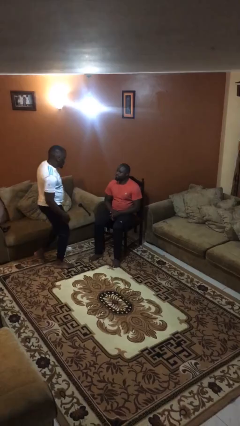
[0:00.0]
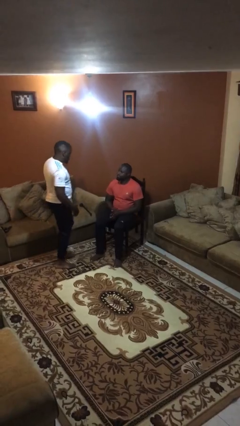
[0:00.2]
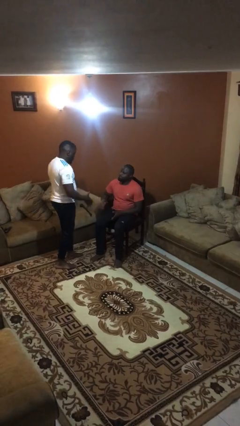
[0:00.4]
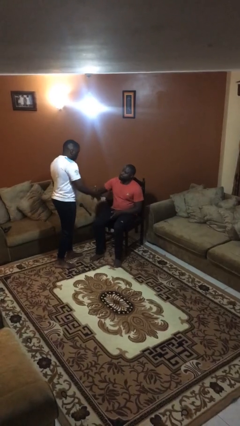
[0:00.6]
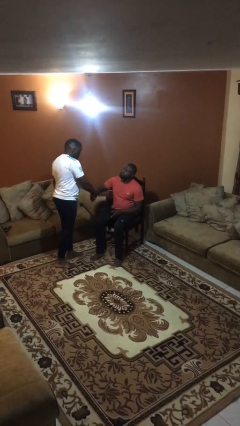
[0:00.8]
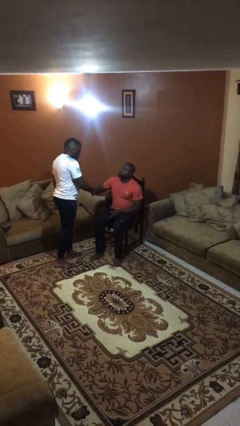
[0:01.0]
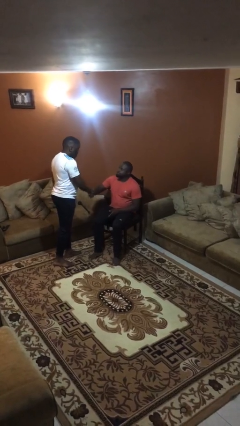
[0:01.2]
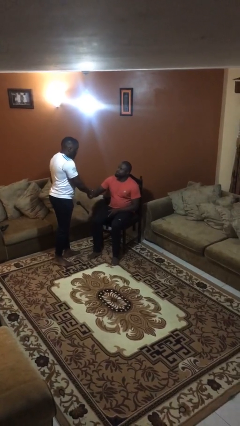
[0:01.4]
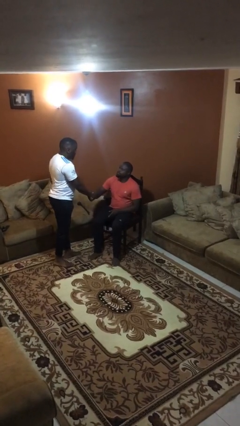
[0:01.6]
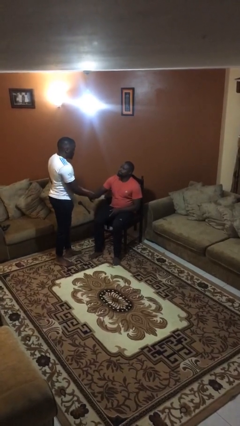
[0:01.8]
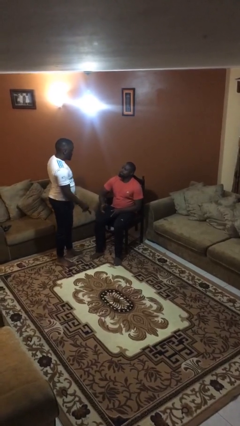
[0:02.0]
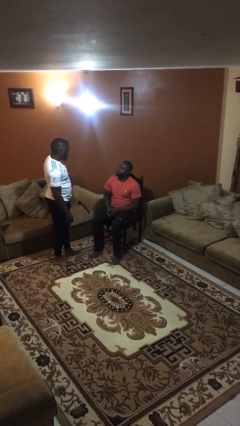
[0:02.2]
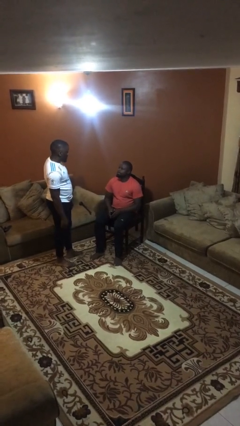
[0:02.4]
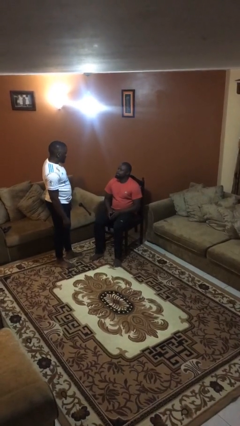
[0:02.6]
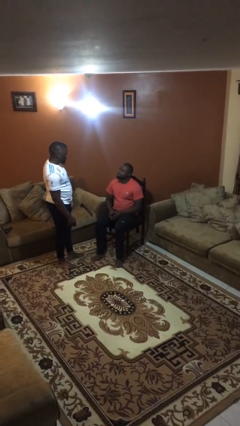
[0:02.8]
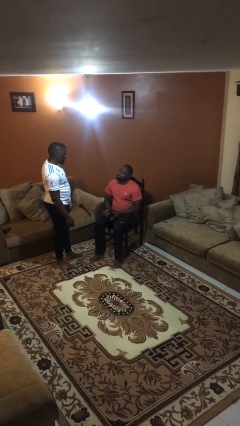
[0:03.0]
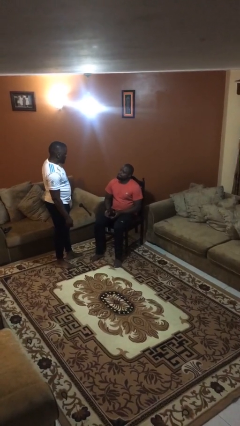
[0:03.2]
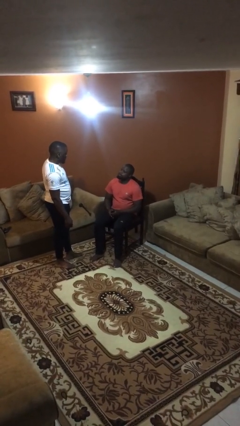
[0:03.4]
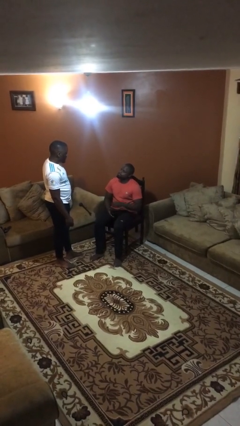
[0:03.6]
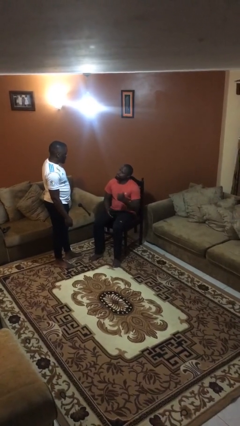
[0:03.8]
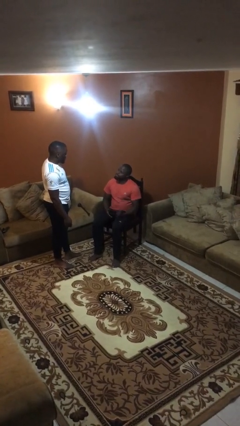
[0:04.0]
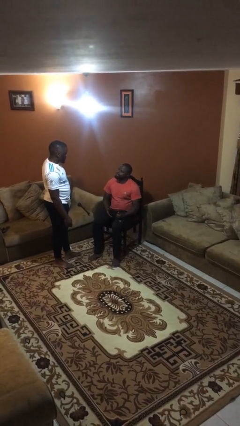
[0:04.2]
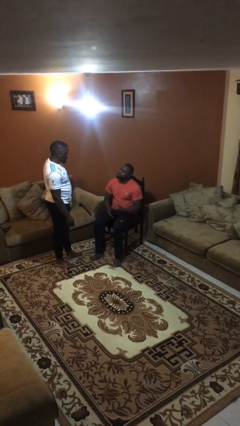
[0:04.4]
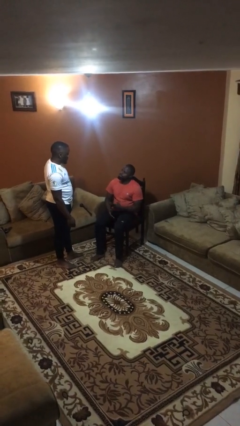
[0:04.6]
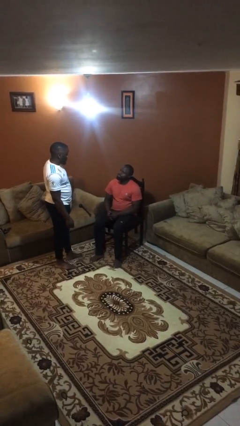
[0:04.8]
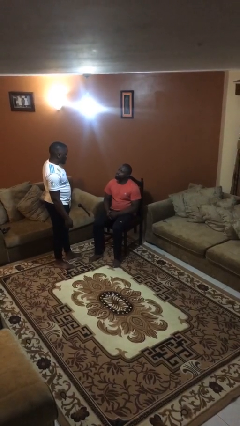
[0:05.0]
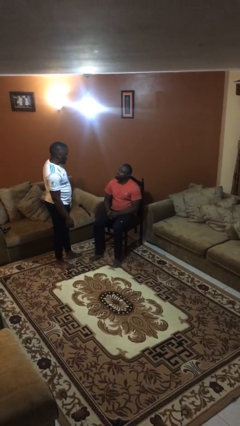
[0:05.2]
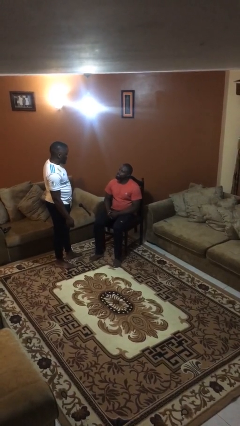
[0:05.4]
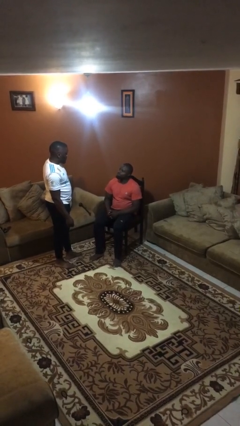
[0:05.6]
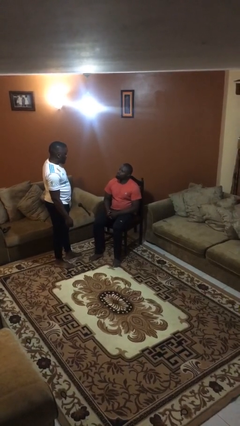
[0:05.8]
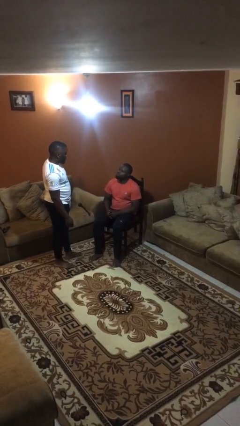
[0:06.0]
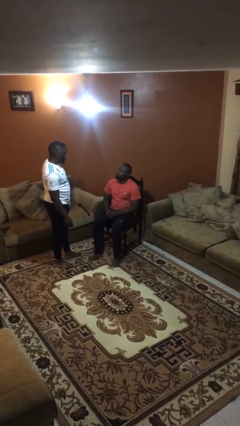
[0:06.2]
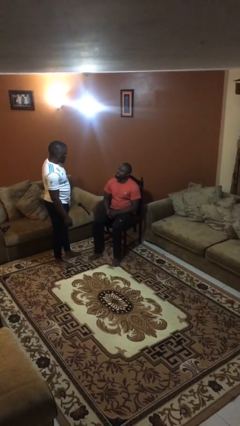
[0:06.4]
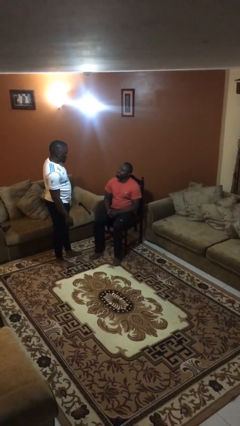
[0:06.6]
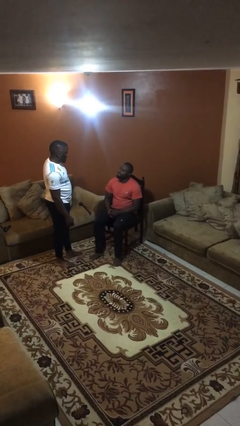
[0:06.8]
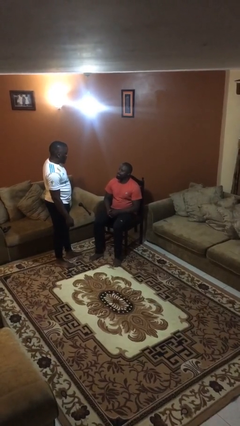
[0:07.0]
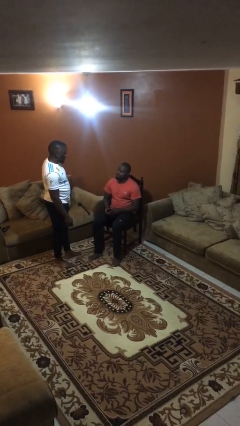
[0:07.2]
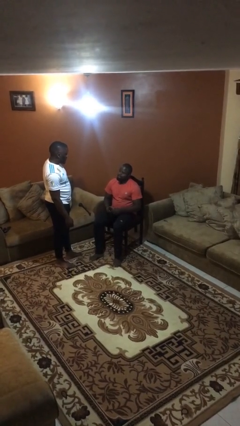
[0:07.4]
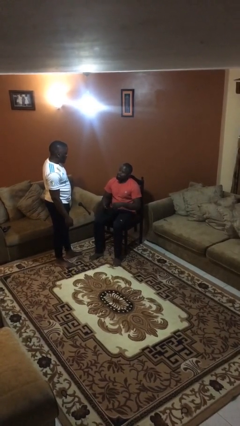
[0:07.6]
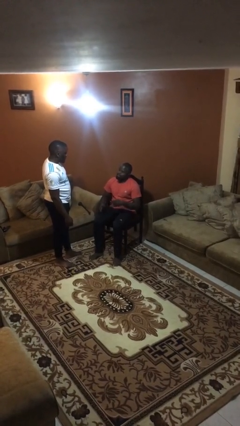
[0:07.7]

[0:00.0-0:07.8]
person shakes hand

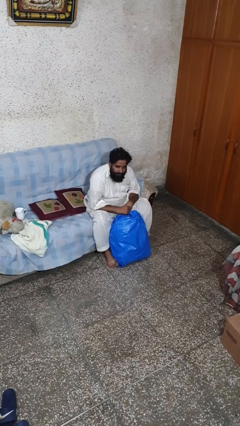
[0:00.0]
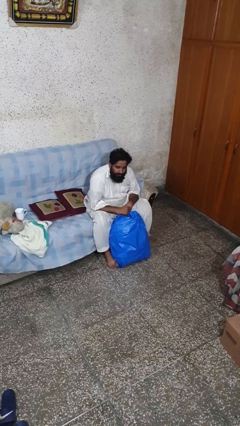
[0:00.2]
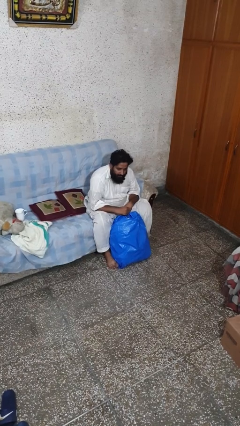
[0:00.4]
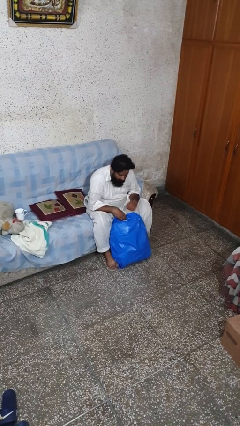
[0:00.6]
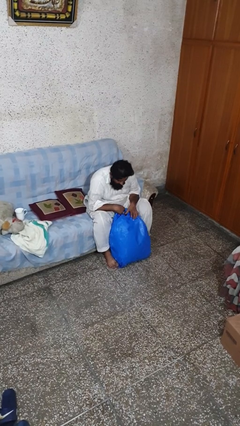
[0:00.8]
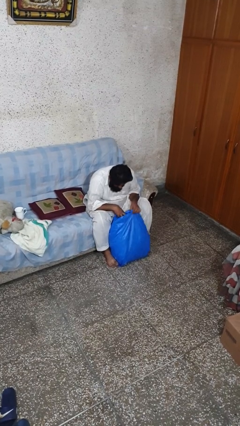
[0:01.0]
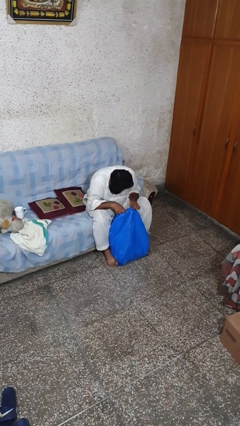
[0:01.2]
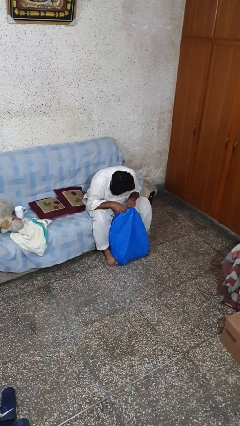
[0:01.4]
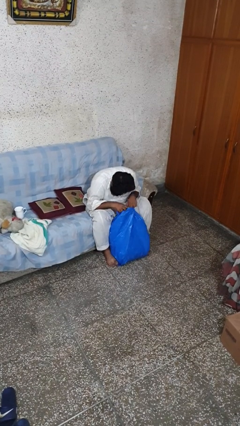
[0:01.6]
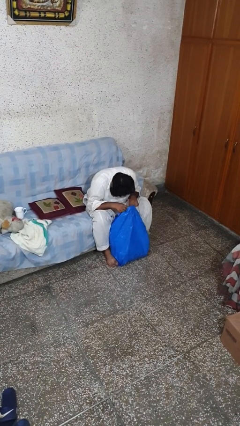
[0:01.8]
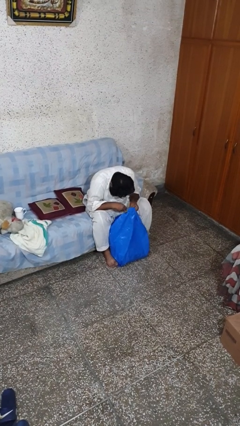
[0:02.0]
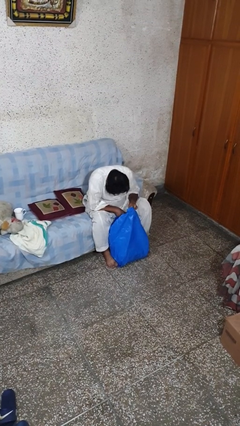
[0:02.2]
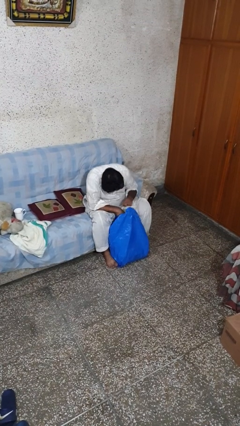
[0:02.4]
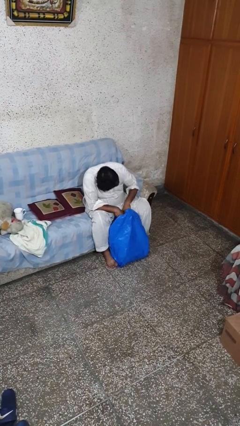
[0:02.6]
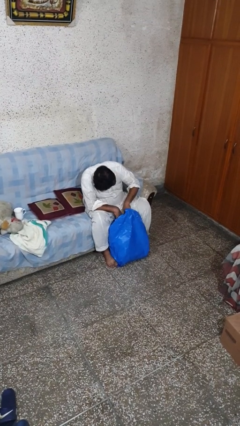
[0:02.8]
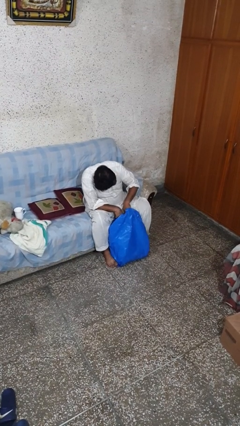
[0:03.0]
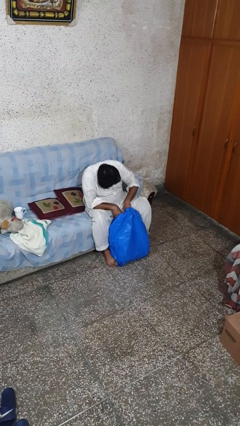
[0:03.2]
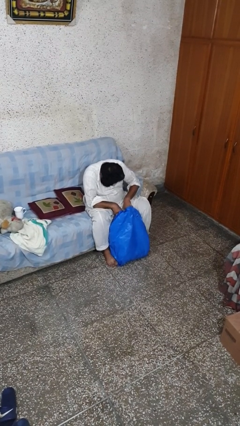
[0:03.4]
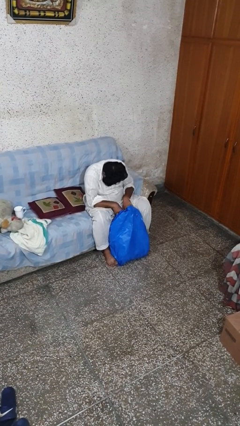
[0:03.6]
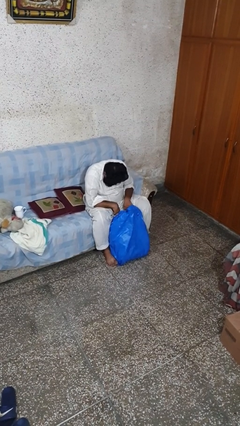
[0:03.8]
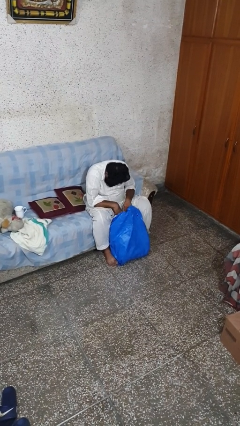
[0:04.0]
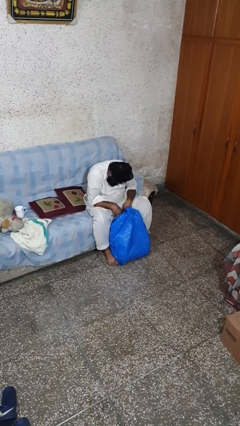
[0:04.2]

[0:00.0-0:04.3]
person searches in bag

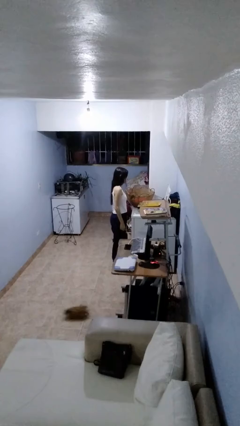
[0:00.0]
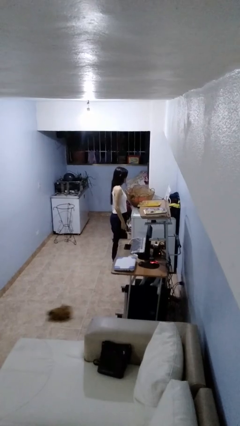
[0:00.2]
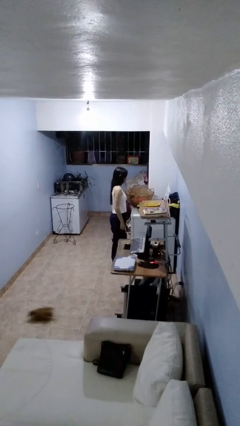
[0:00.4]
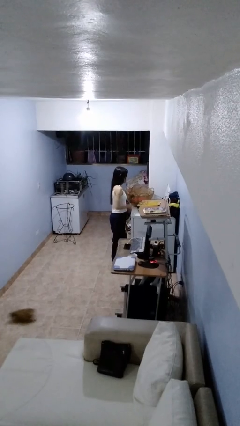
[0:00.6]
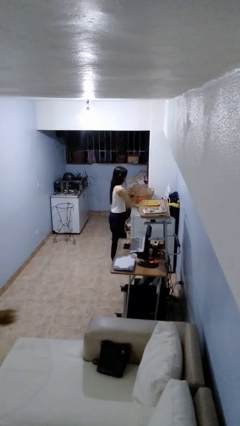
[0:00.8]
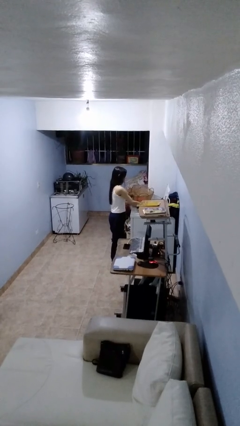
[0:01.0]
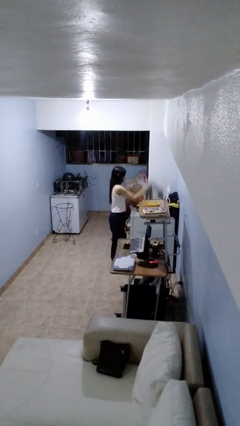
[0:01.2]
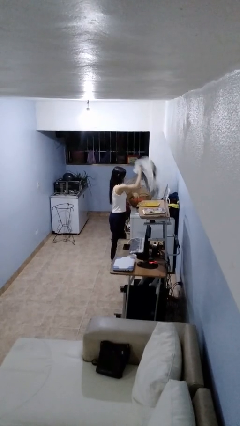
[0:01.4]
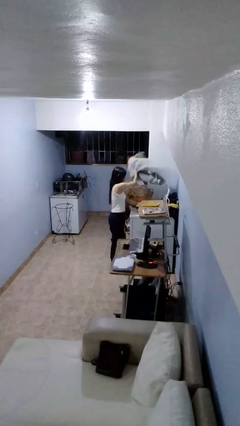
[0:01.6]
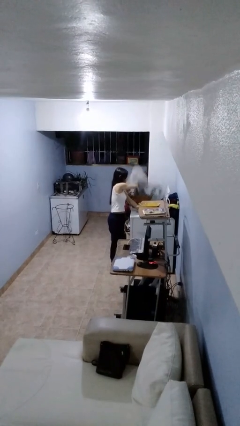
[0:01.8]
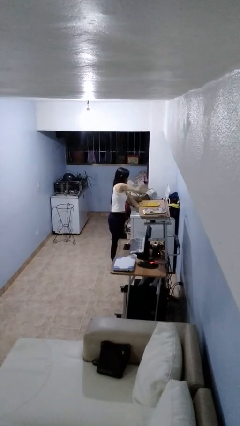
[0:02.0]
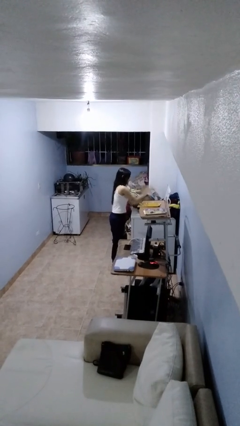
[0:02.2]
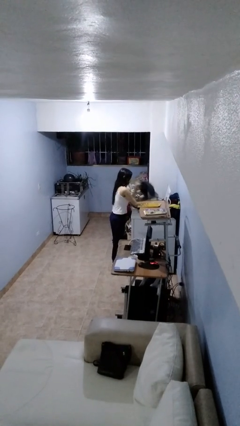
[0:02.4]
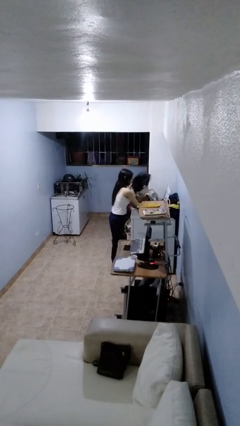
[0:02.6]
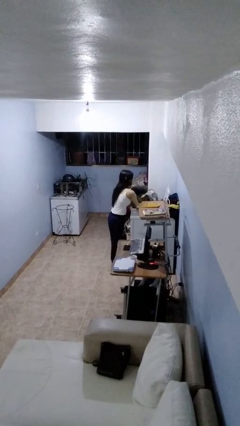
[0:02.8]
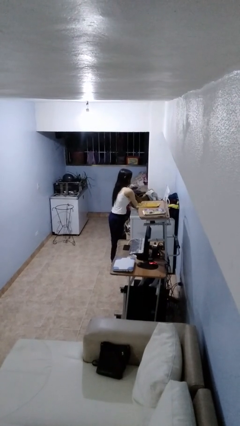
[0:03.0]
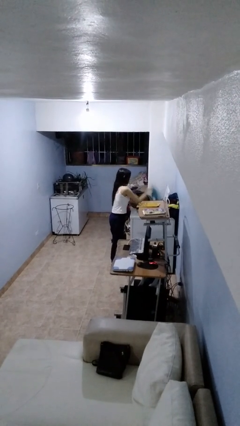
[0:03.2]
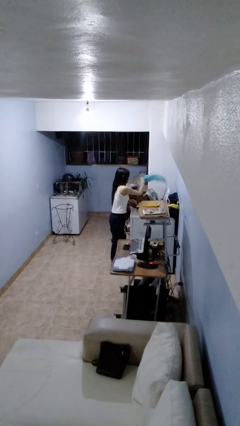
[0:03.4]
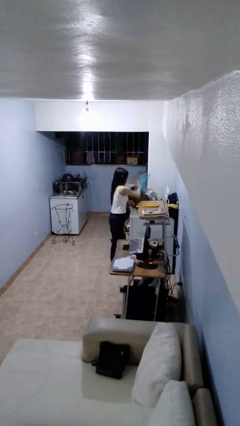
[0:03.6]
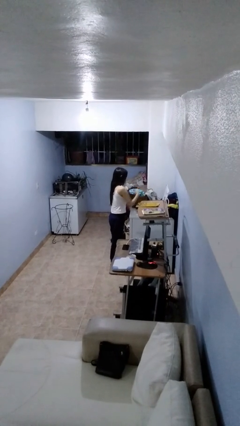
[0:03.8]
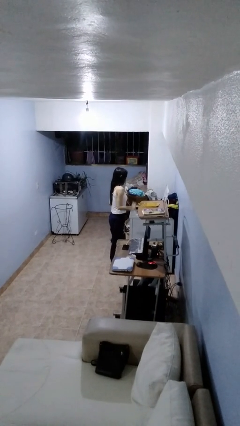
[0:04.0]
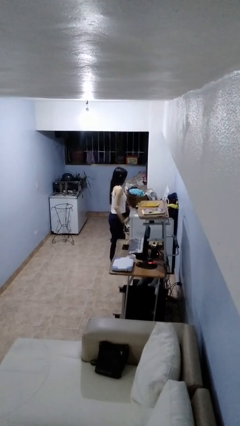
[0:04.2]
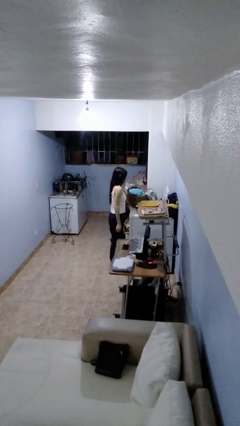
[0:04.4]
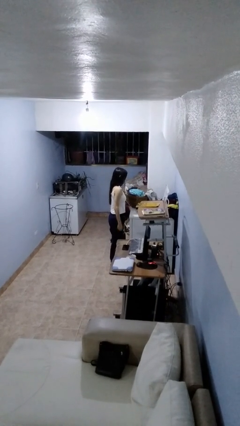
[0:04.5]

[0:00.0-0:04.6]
person unloads clotheswasher

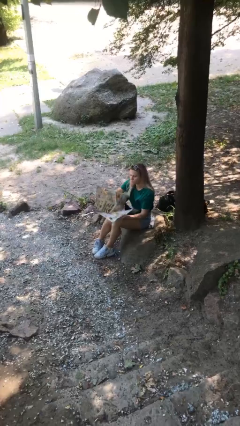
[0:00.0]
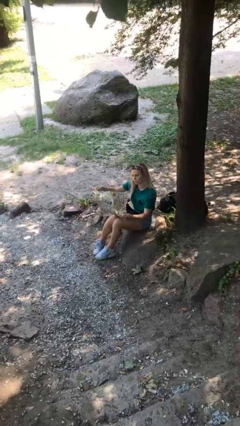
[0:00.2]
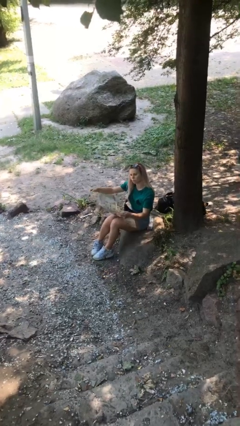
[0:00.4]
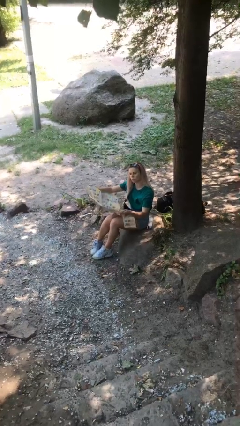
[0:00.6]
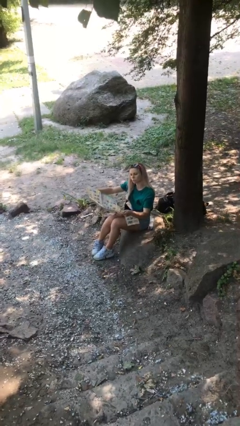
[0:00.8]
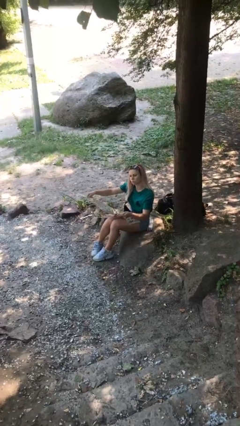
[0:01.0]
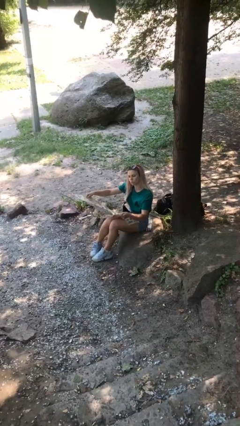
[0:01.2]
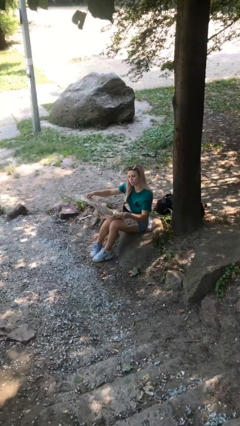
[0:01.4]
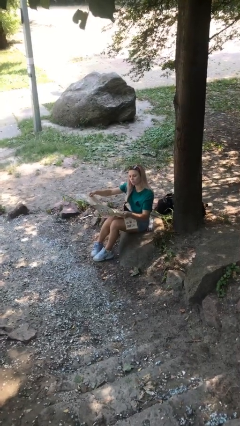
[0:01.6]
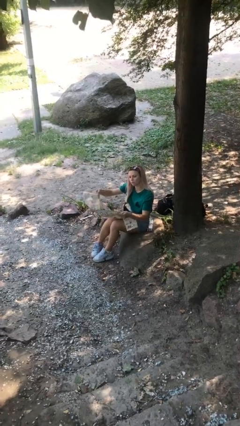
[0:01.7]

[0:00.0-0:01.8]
person reads newspaper
